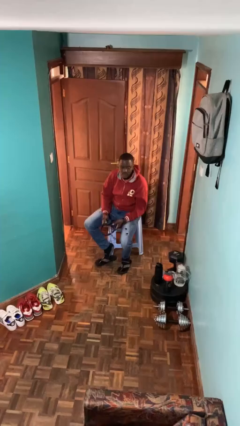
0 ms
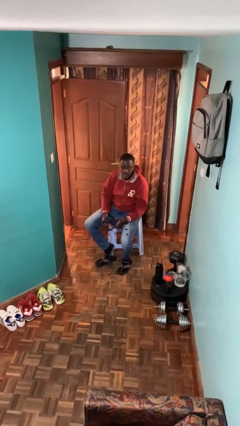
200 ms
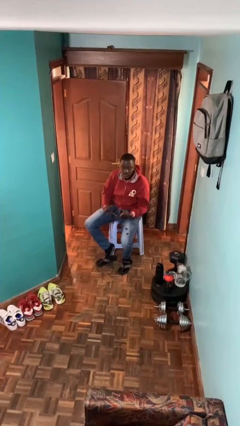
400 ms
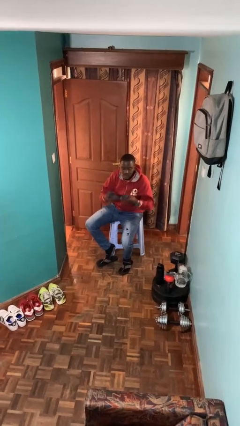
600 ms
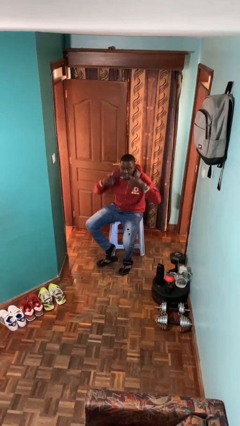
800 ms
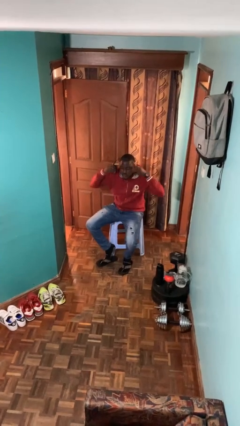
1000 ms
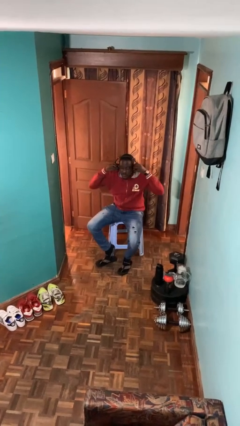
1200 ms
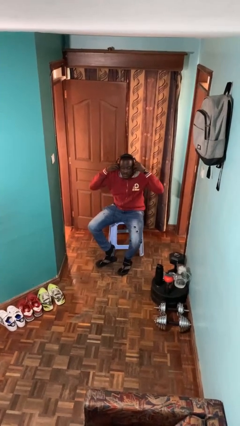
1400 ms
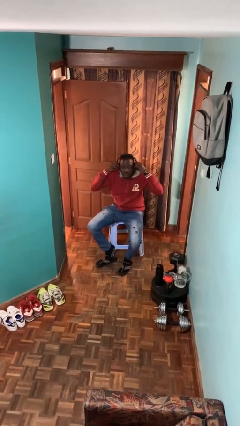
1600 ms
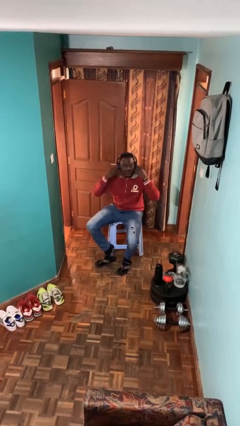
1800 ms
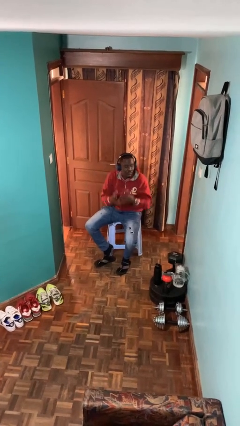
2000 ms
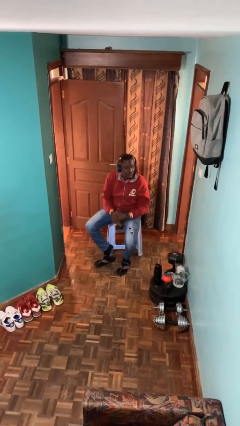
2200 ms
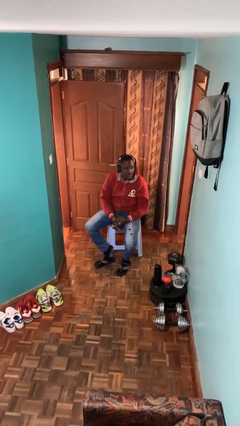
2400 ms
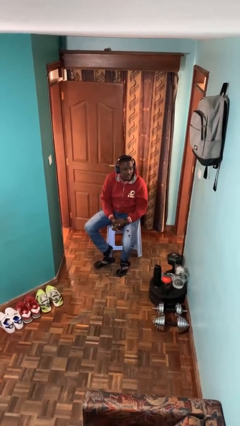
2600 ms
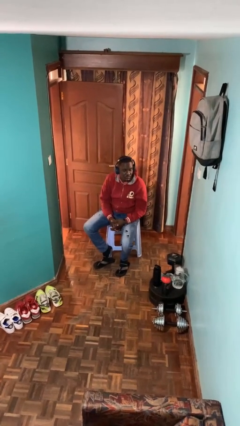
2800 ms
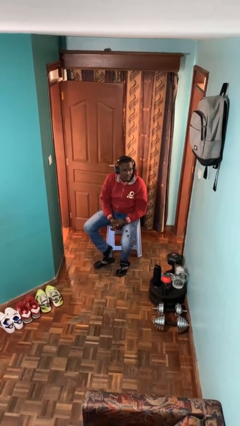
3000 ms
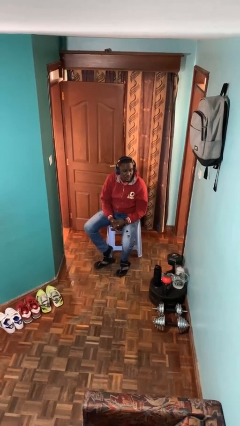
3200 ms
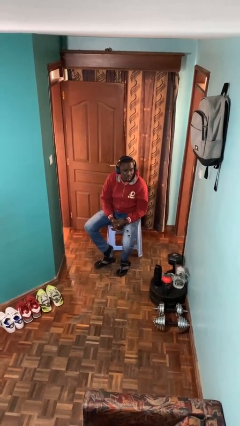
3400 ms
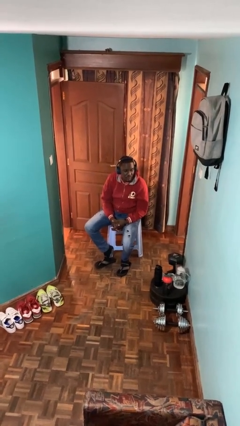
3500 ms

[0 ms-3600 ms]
person puts on headphones

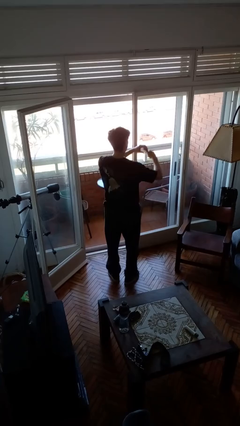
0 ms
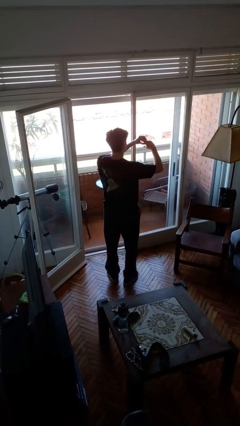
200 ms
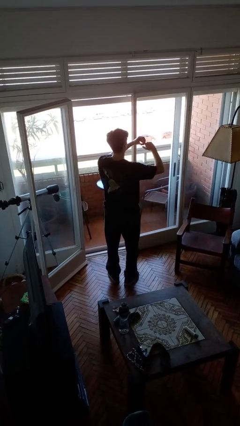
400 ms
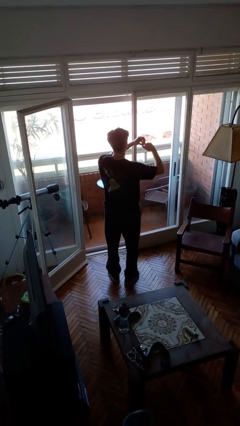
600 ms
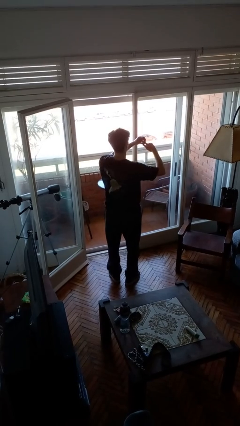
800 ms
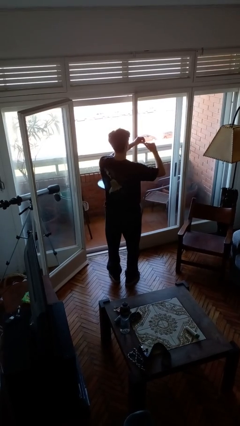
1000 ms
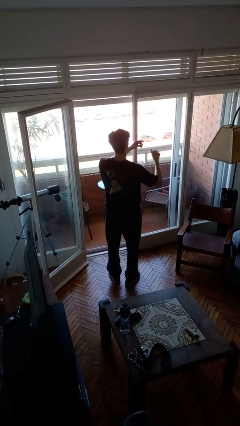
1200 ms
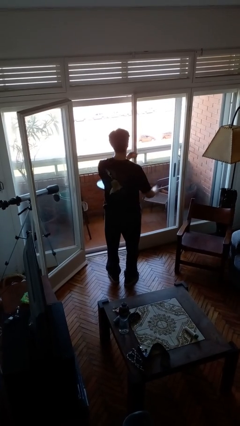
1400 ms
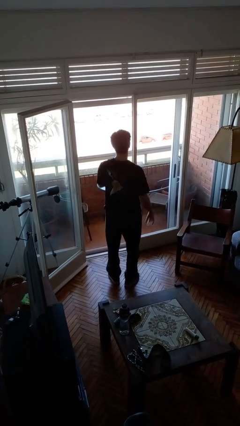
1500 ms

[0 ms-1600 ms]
person takes off ring

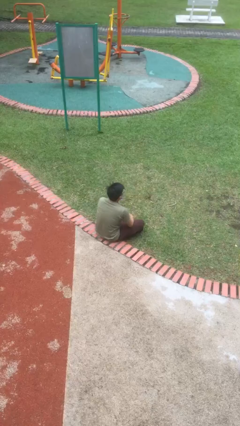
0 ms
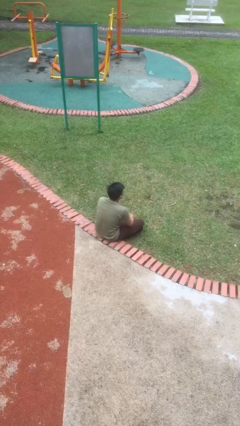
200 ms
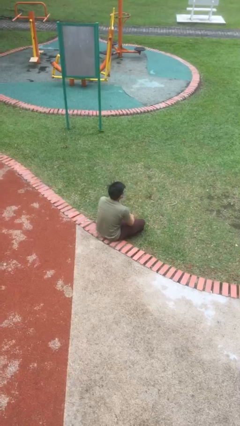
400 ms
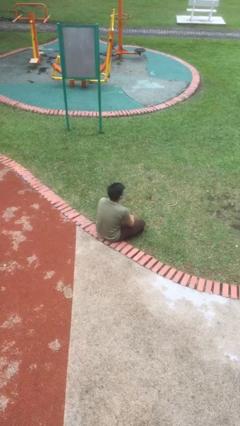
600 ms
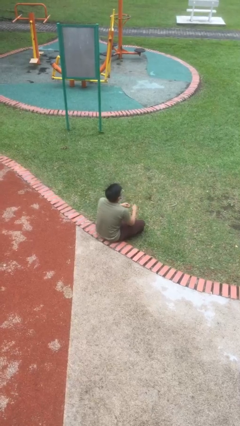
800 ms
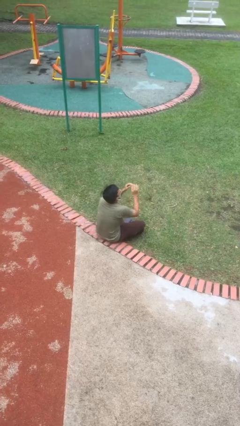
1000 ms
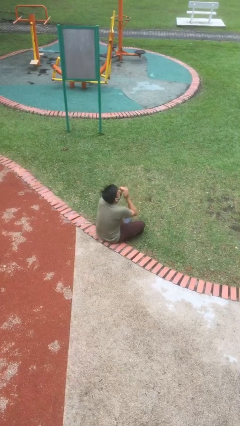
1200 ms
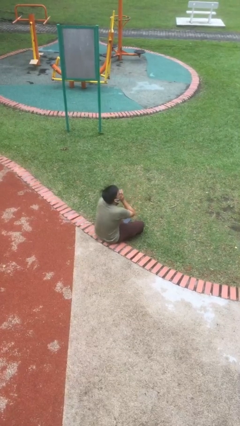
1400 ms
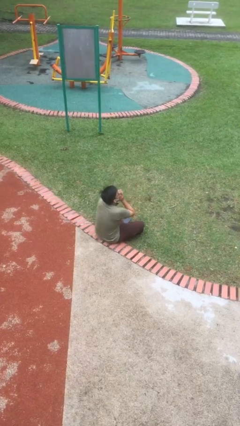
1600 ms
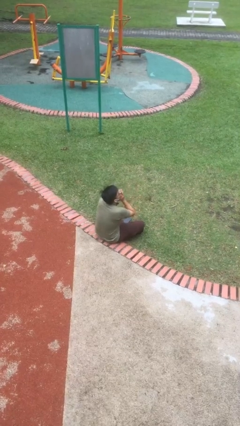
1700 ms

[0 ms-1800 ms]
person sneezes into hand

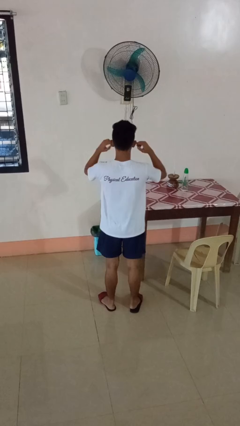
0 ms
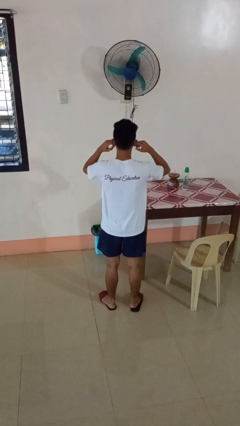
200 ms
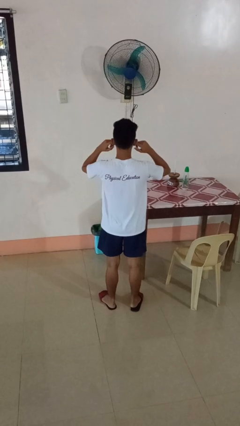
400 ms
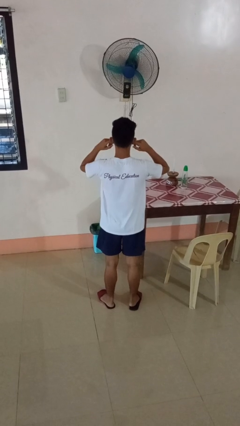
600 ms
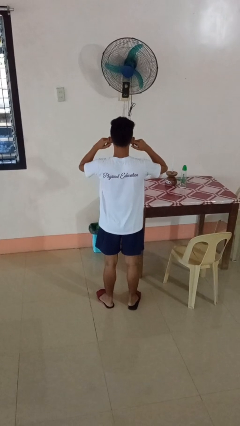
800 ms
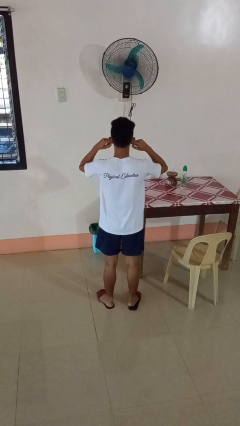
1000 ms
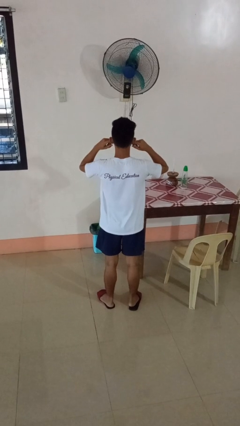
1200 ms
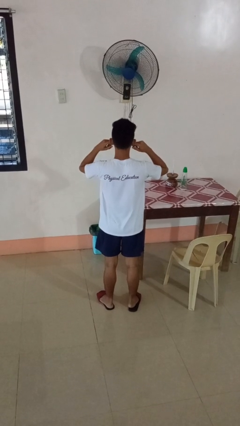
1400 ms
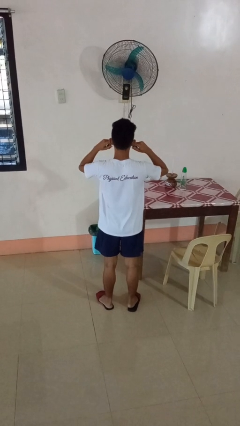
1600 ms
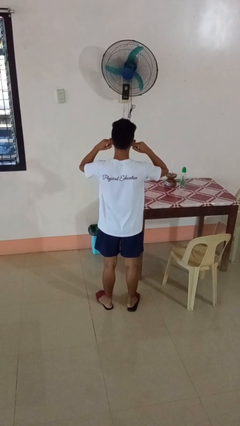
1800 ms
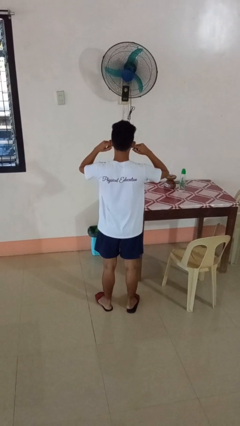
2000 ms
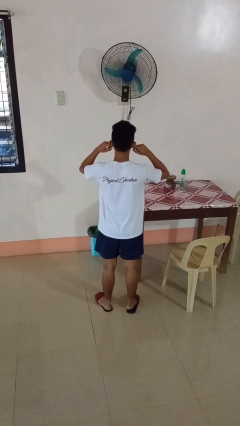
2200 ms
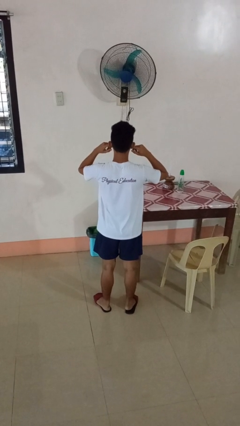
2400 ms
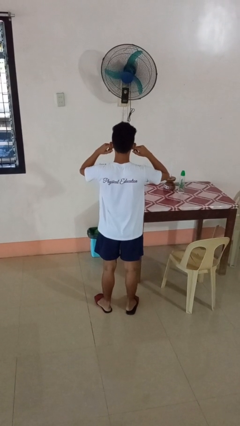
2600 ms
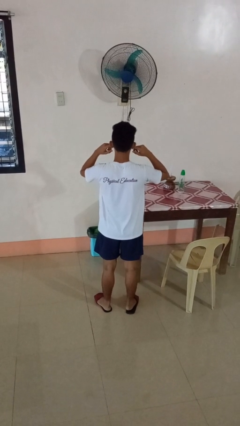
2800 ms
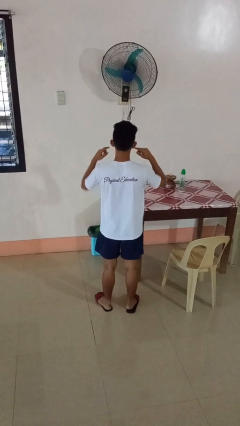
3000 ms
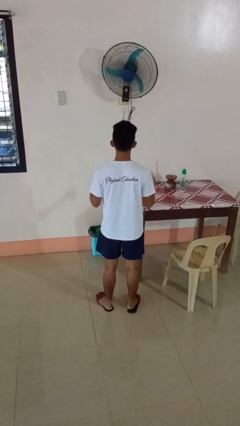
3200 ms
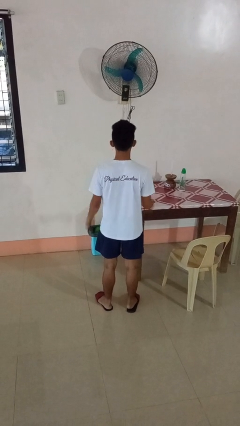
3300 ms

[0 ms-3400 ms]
person puts fingers in ear

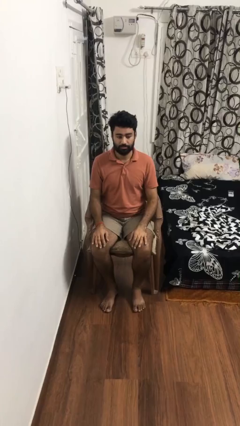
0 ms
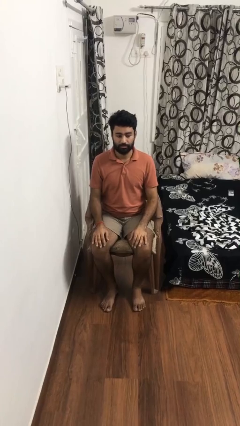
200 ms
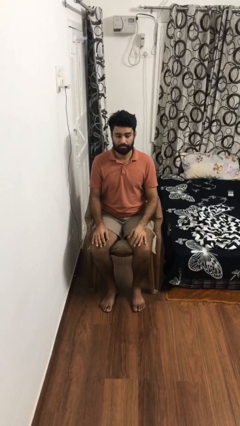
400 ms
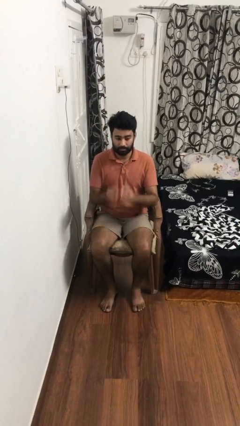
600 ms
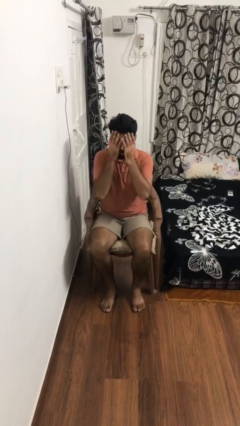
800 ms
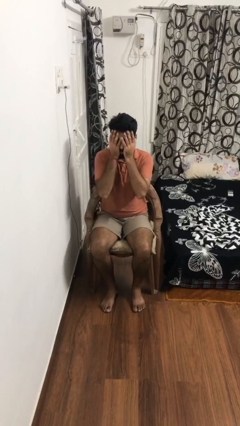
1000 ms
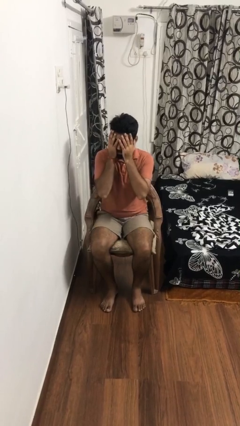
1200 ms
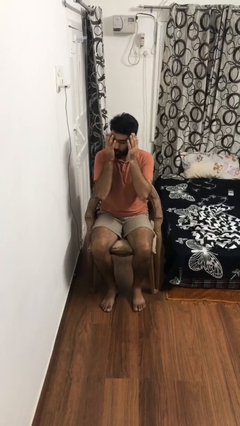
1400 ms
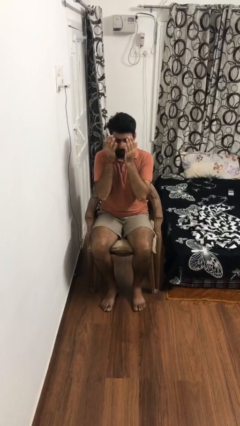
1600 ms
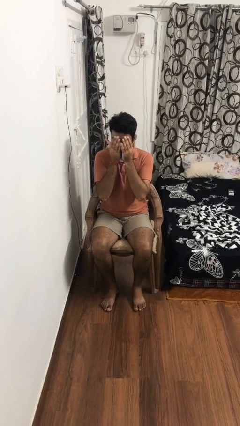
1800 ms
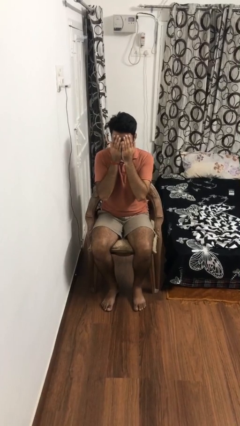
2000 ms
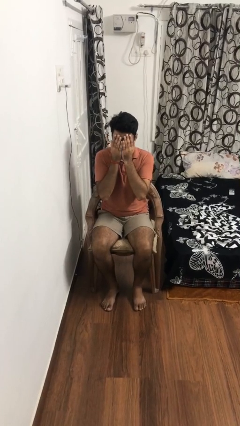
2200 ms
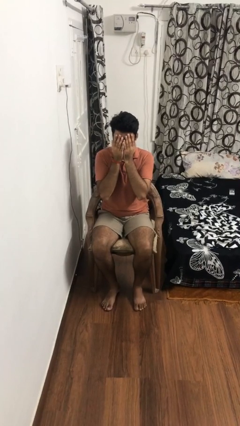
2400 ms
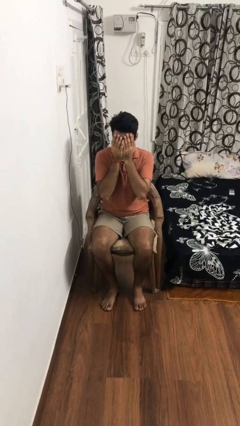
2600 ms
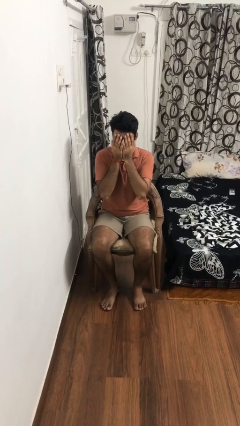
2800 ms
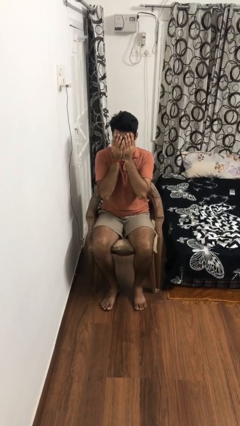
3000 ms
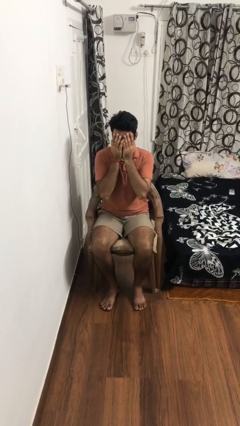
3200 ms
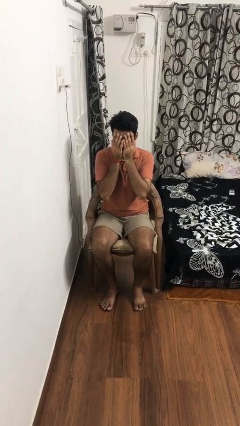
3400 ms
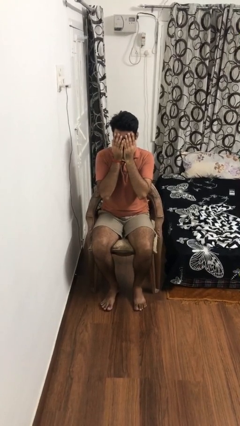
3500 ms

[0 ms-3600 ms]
person covers face with hands

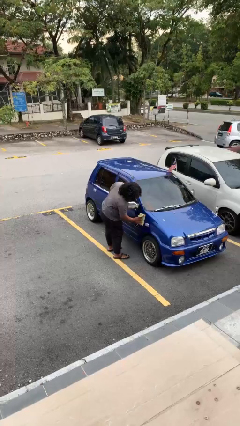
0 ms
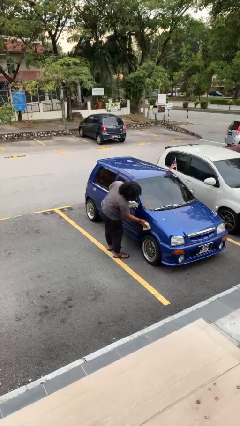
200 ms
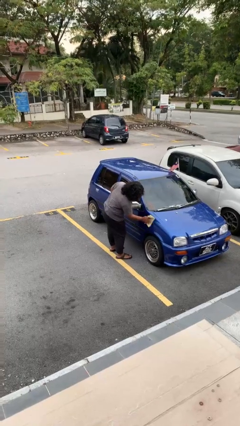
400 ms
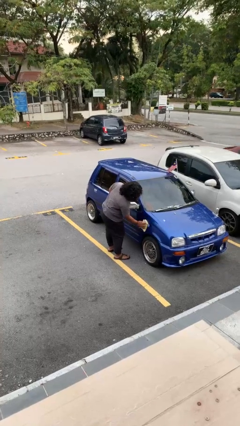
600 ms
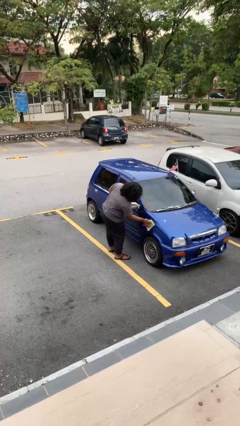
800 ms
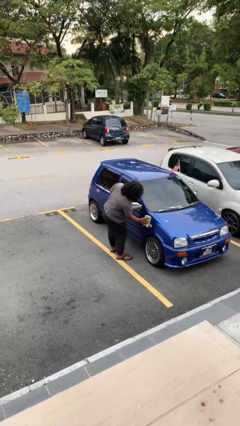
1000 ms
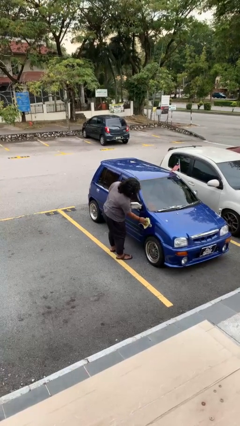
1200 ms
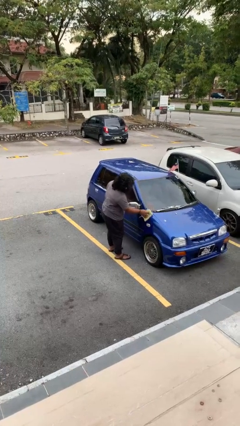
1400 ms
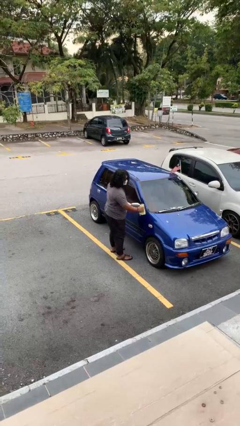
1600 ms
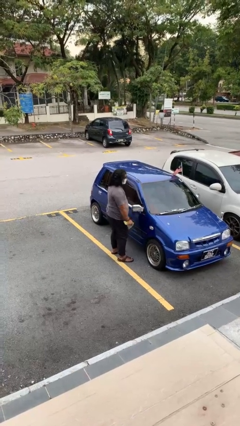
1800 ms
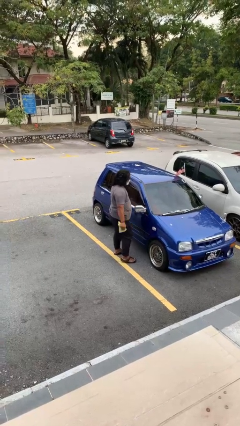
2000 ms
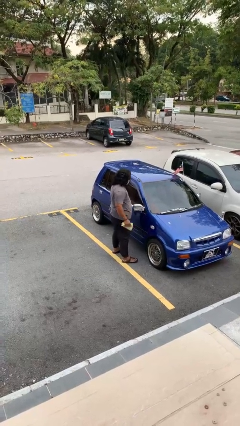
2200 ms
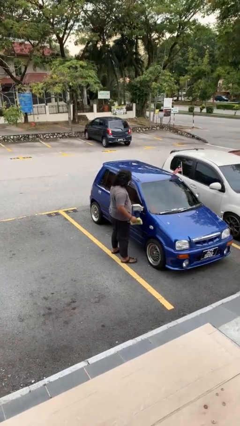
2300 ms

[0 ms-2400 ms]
person polishes car with rag

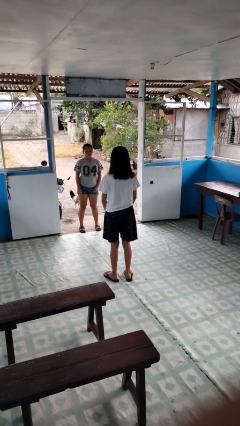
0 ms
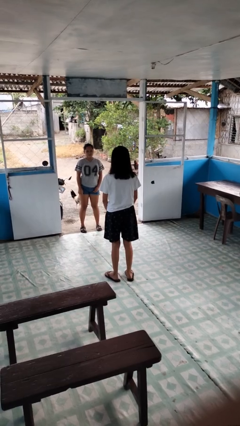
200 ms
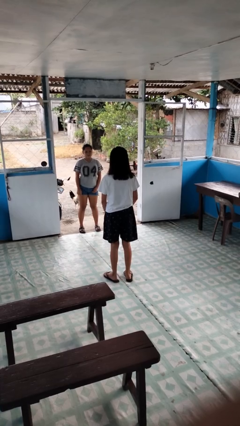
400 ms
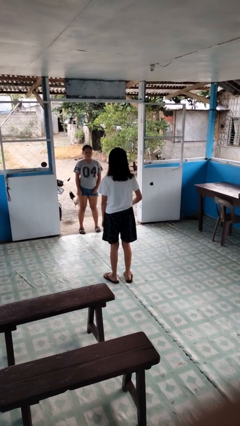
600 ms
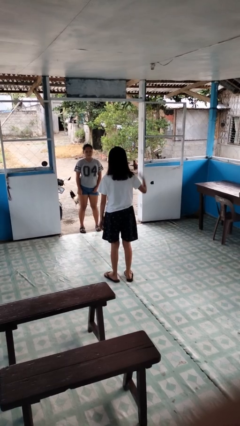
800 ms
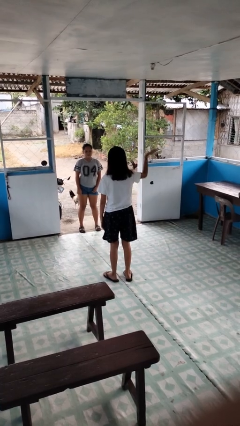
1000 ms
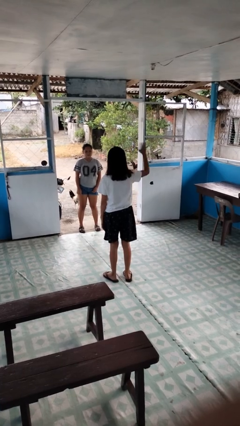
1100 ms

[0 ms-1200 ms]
person waves at person
